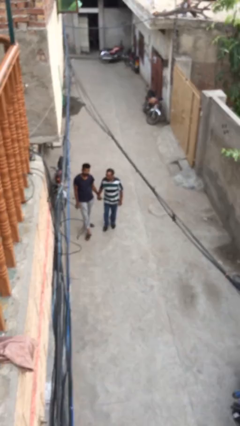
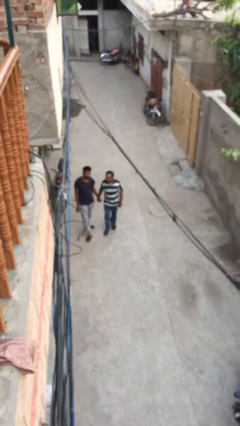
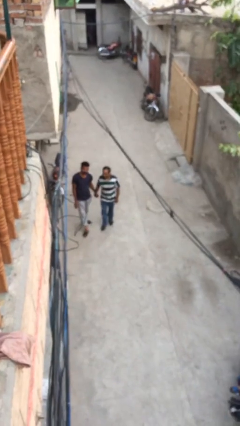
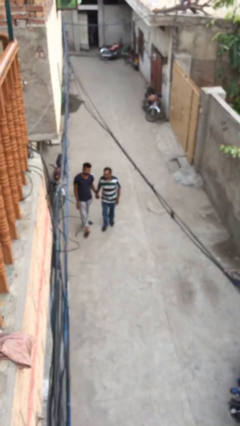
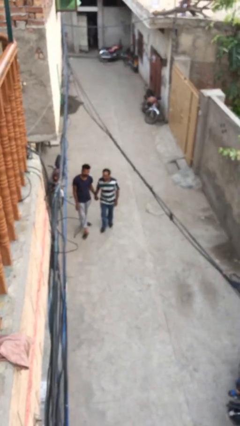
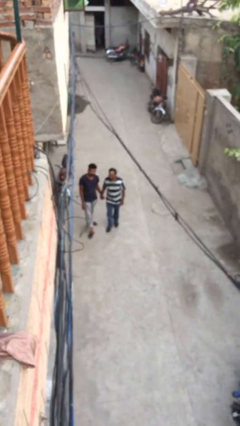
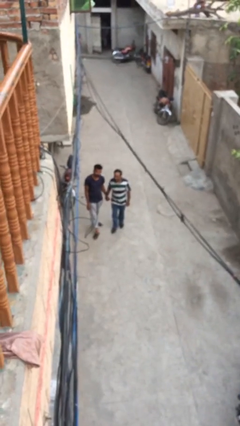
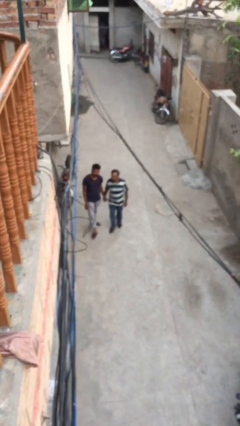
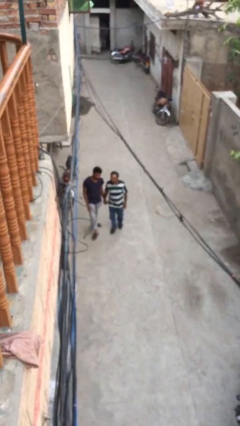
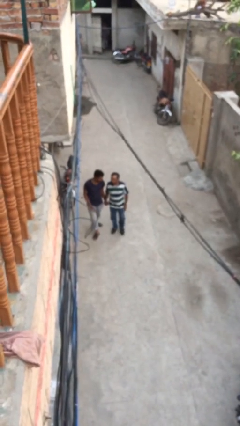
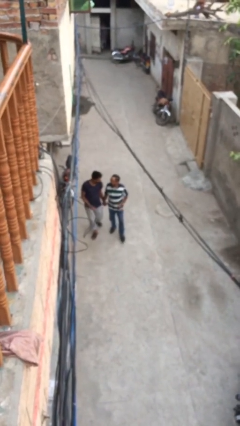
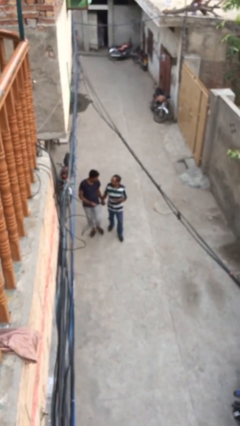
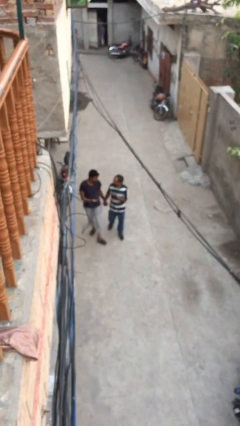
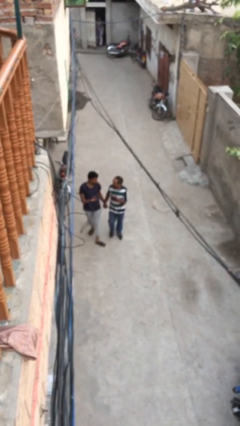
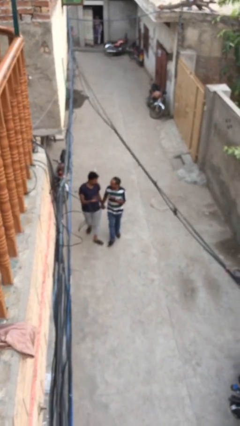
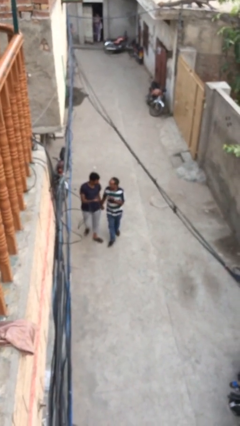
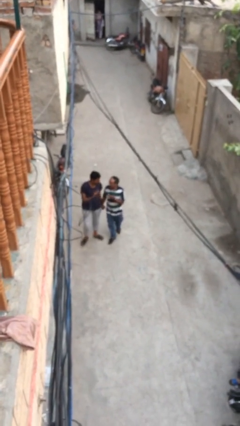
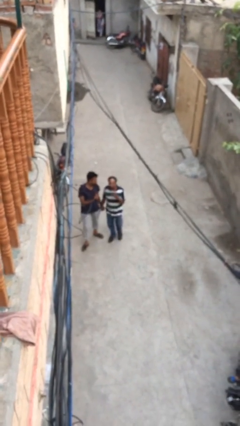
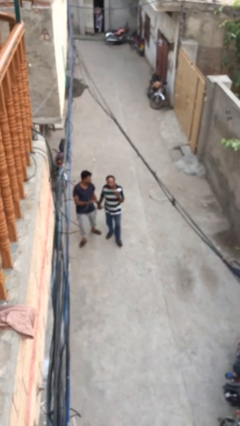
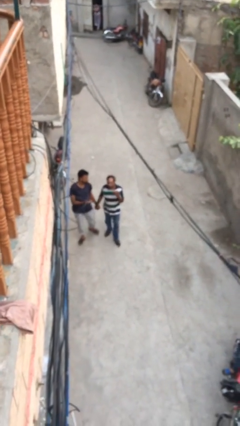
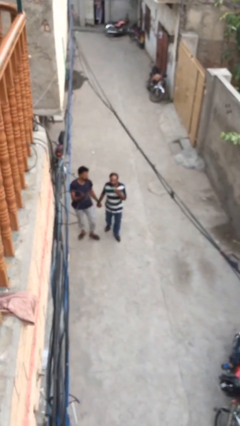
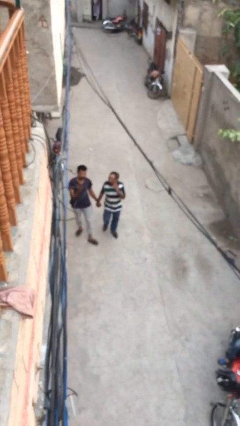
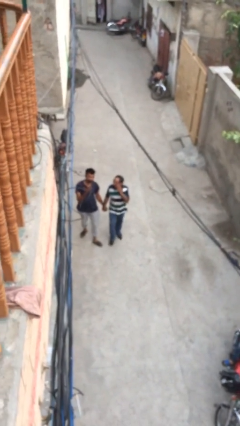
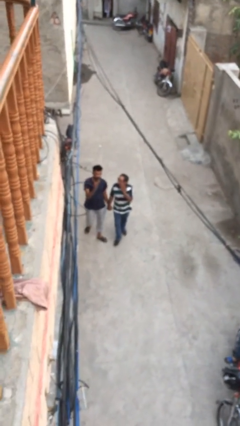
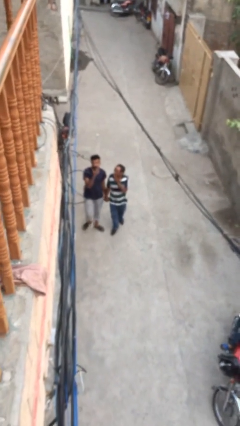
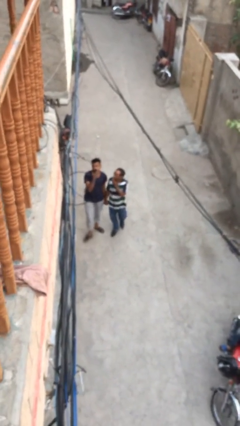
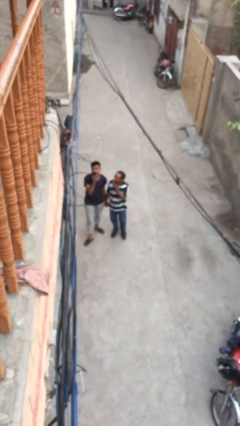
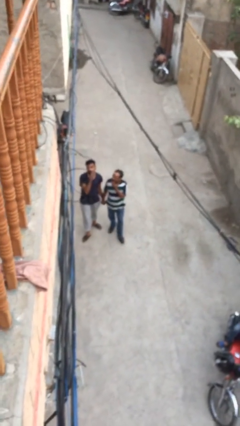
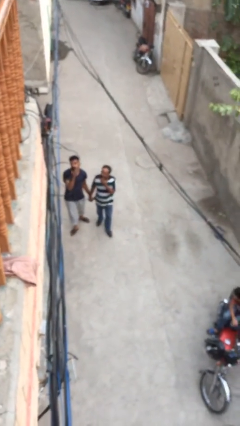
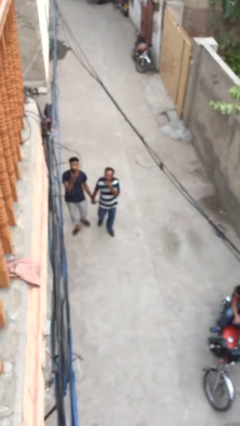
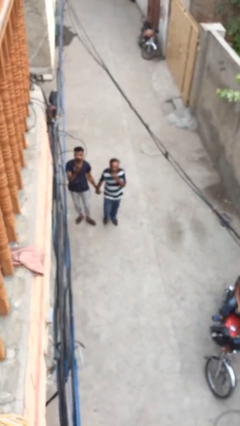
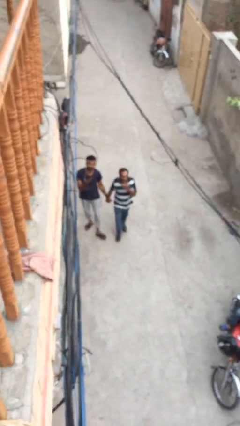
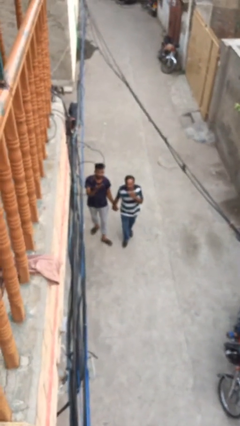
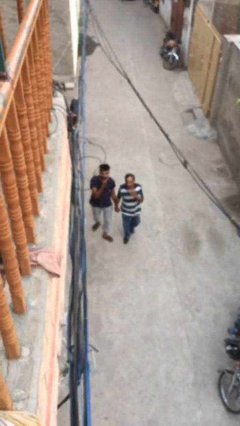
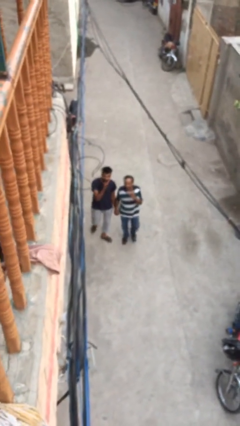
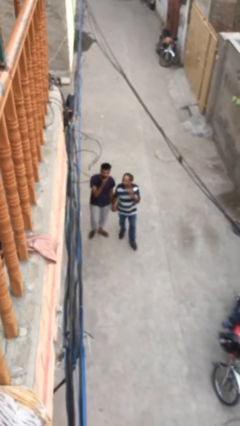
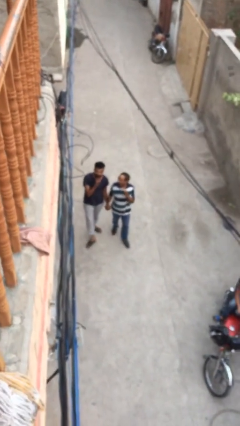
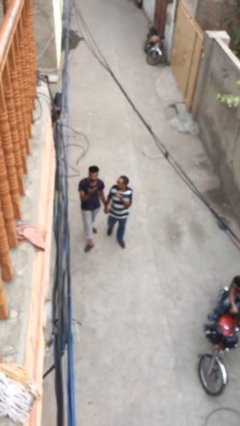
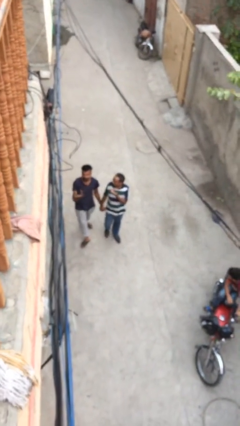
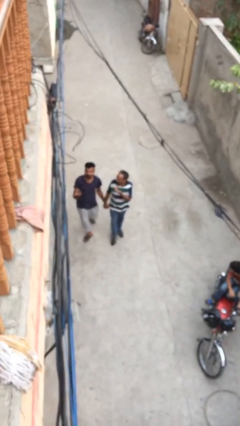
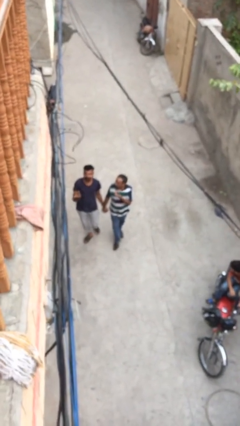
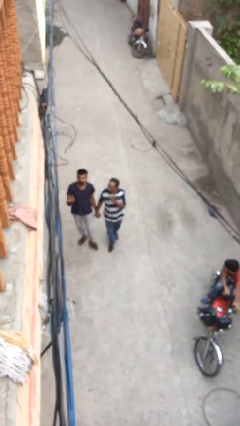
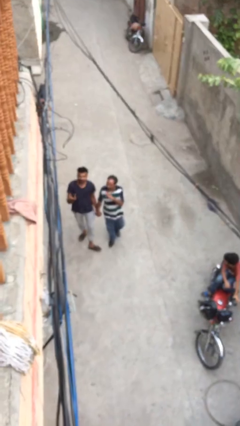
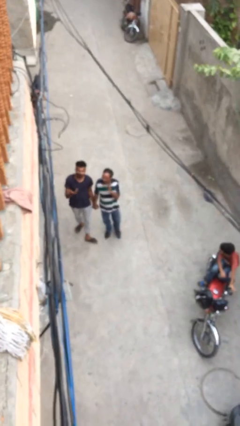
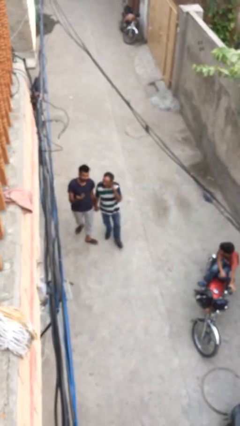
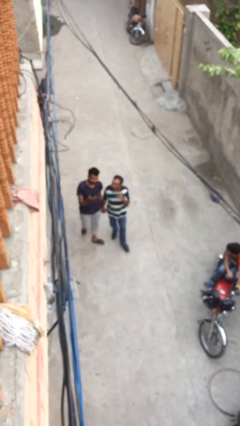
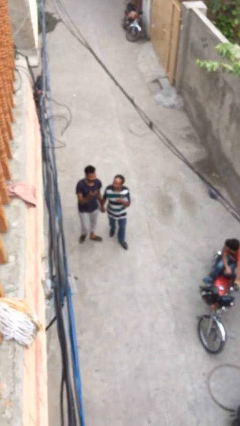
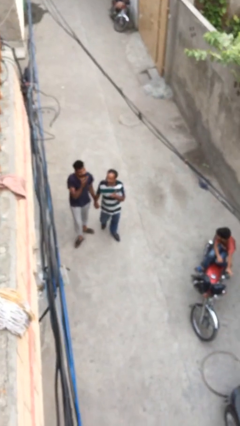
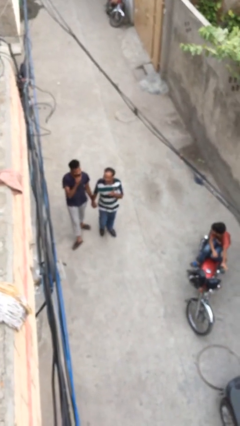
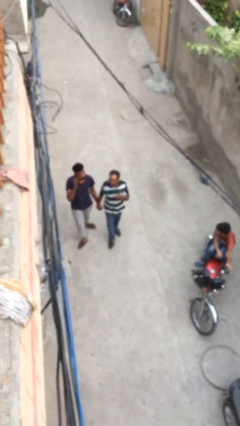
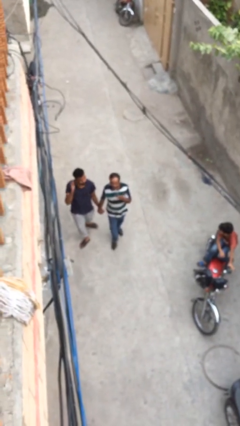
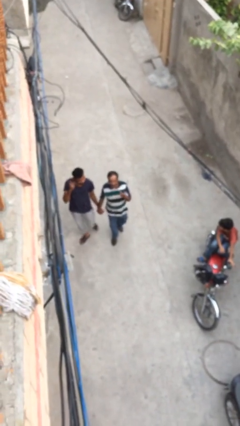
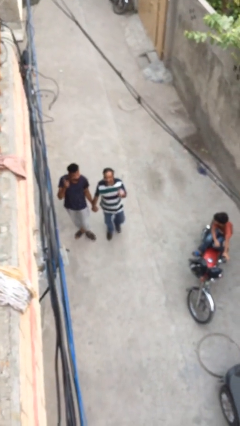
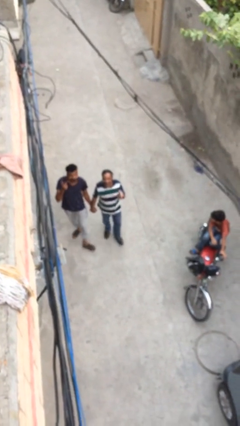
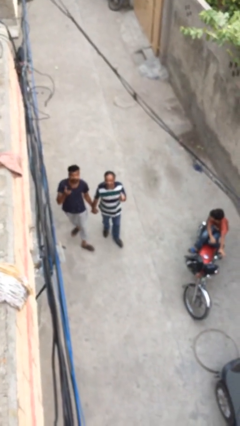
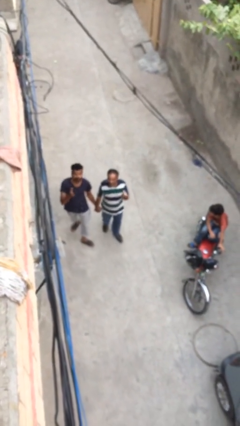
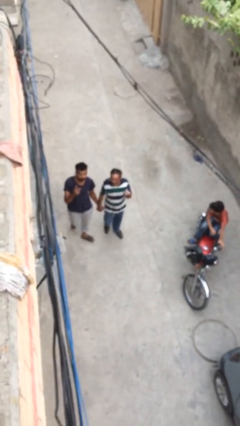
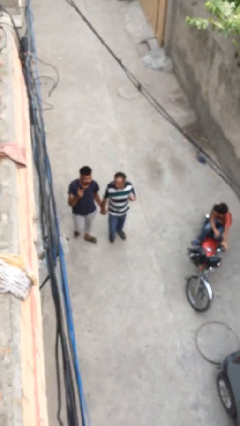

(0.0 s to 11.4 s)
person holds hand

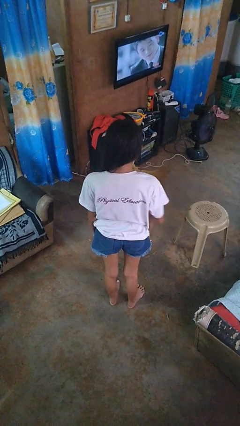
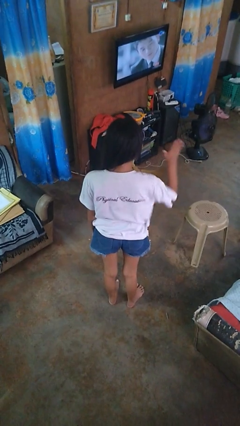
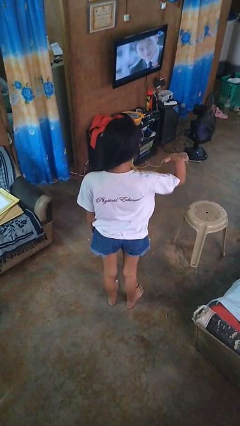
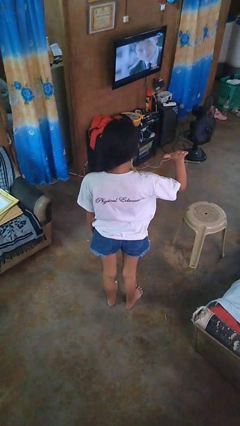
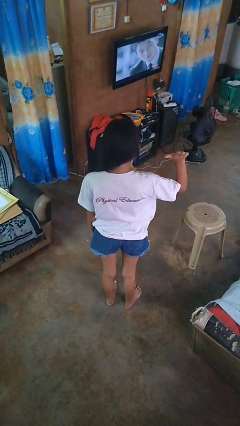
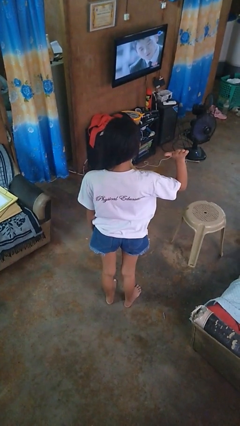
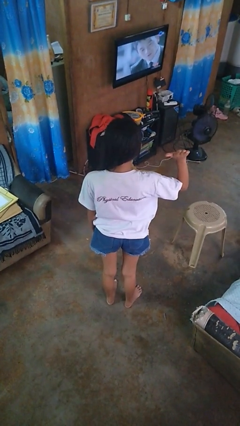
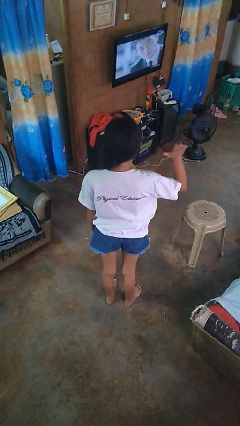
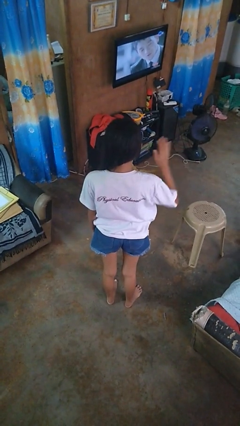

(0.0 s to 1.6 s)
person gestures number five

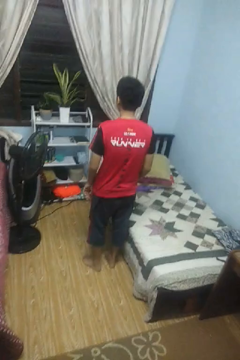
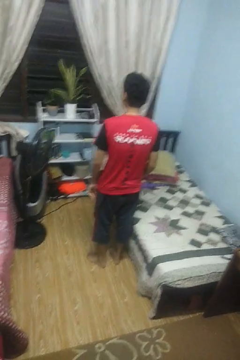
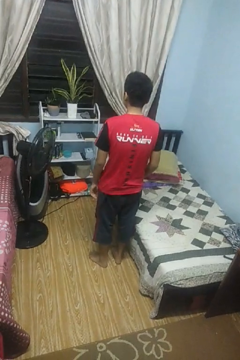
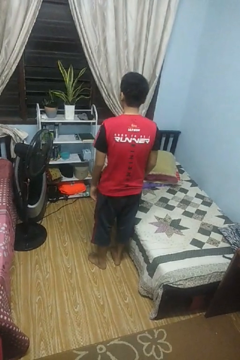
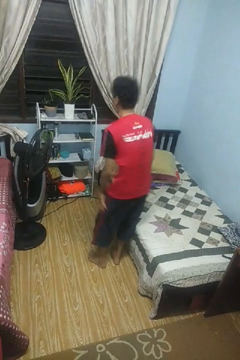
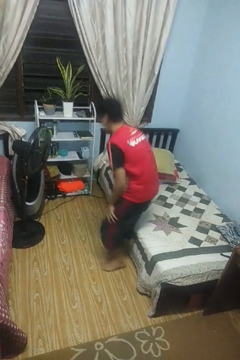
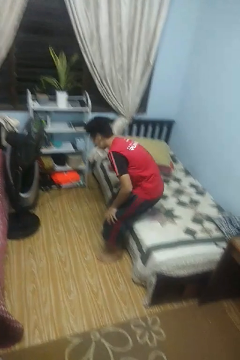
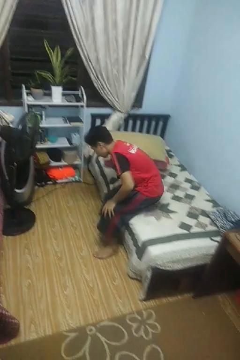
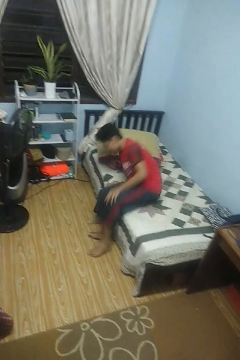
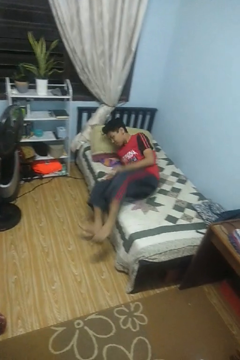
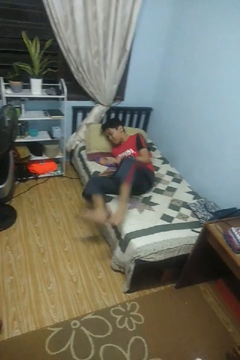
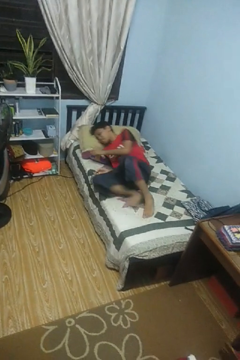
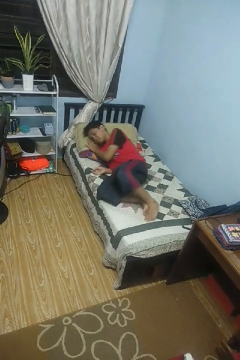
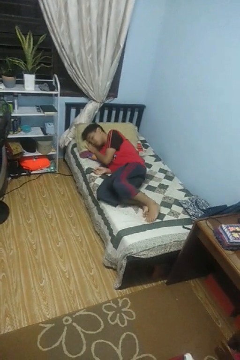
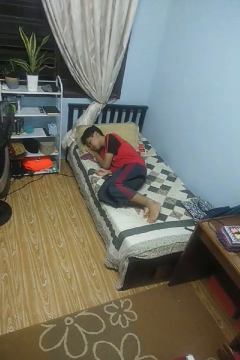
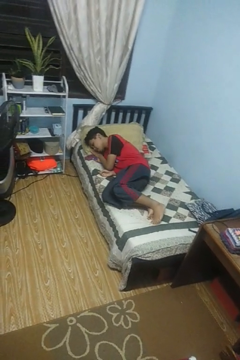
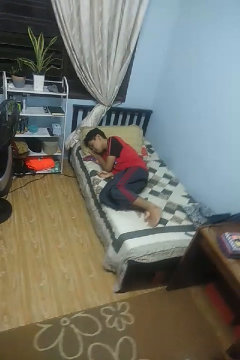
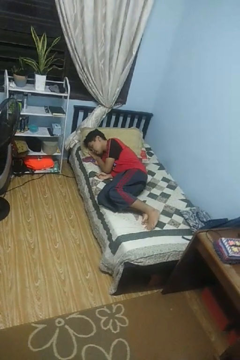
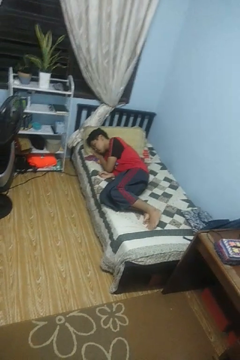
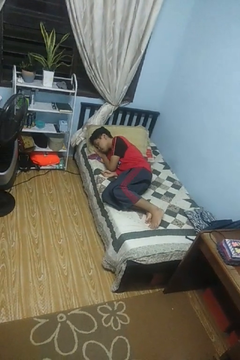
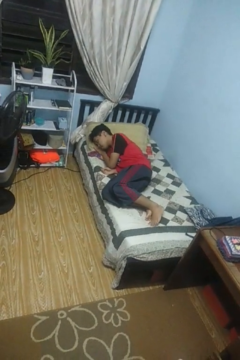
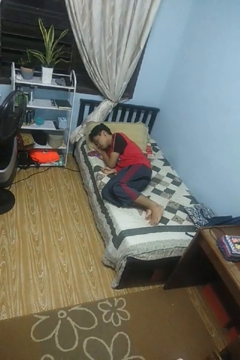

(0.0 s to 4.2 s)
person lies down on bed

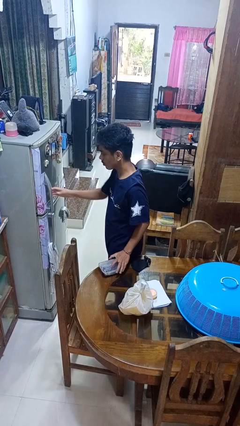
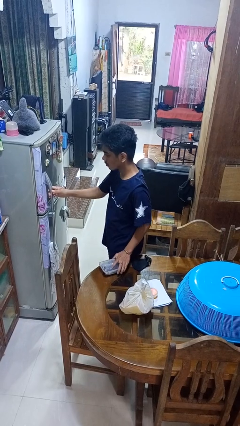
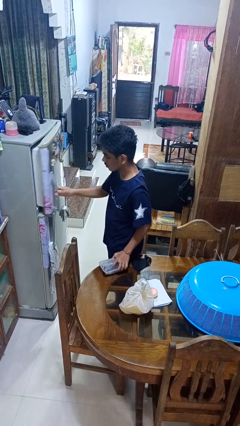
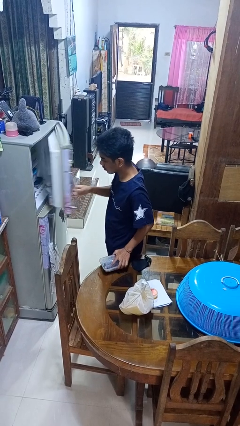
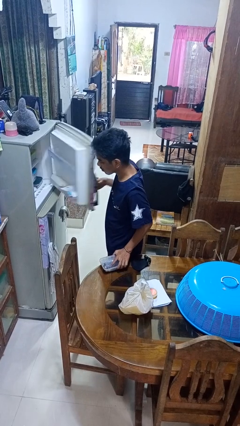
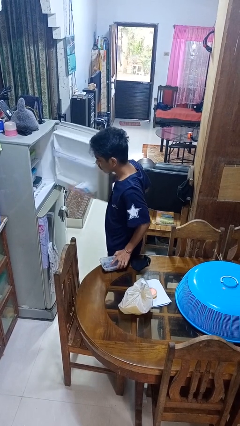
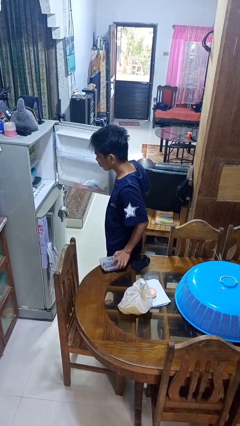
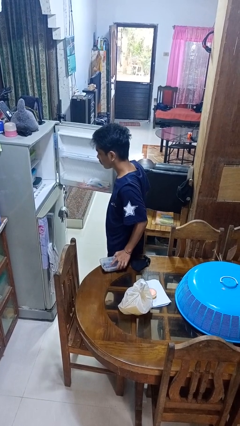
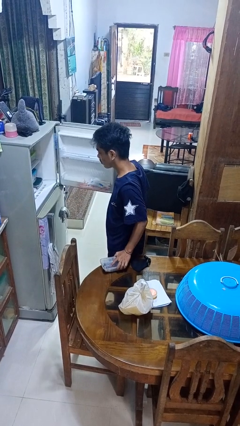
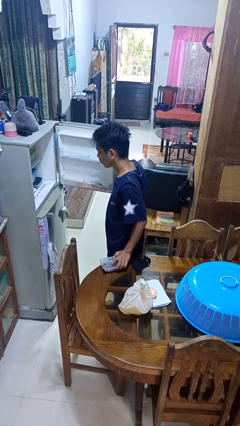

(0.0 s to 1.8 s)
person opens refrigerator
